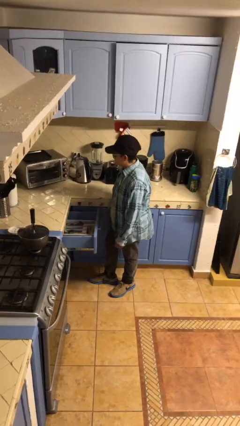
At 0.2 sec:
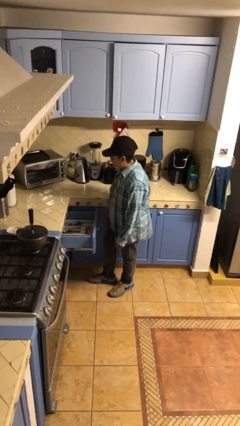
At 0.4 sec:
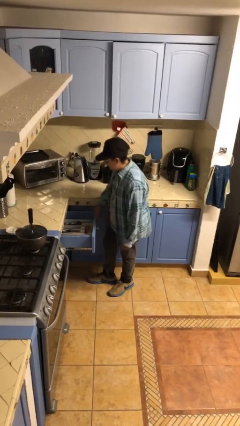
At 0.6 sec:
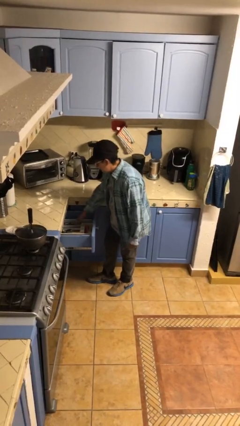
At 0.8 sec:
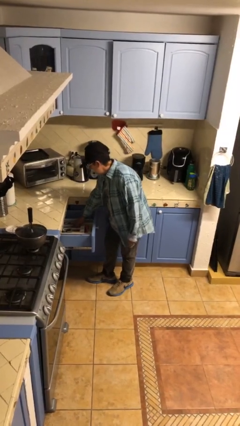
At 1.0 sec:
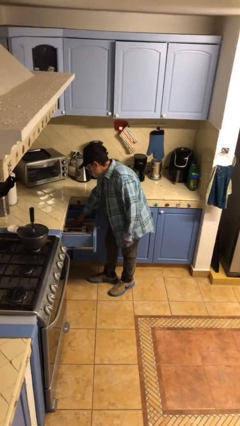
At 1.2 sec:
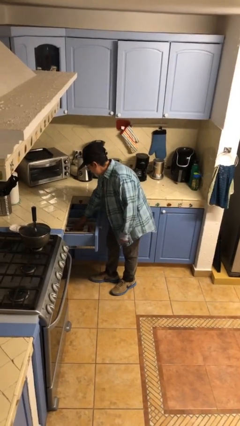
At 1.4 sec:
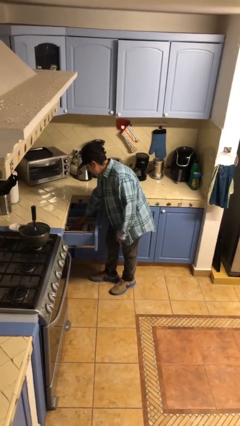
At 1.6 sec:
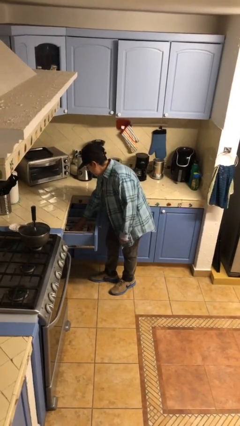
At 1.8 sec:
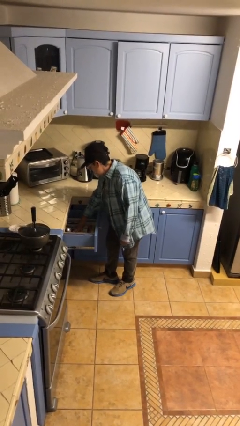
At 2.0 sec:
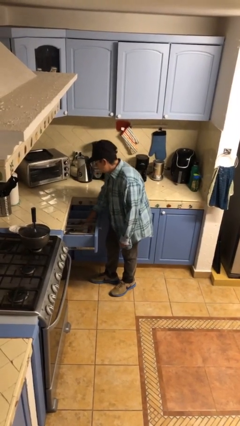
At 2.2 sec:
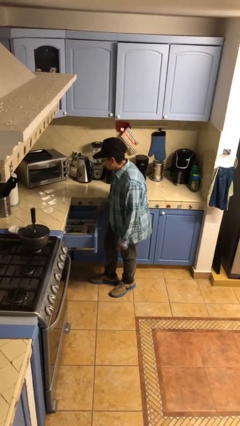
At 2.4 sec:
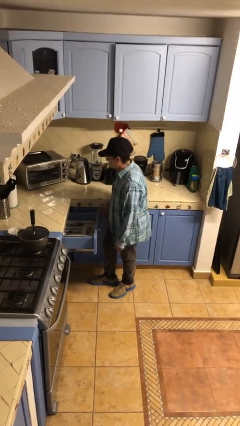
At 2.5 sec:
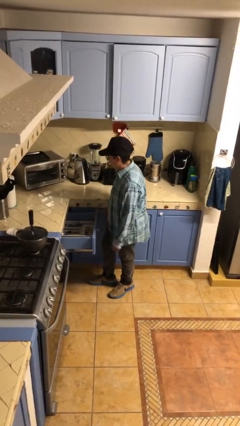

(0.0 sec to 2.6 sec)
person searches in kitchen drawer

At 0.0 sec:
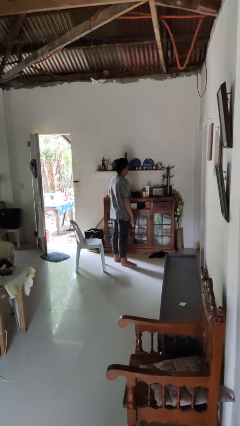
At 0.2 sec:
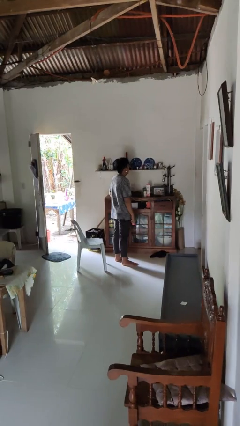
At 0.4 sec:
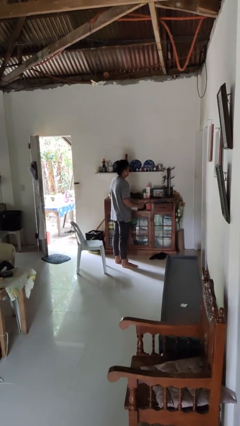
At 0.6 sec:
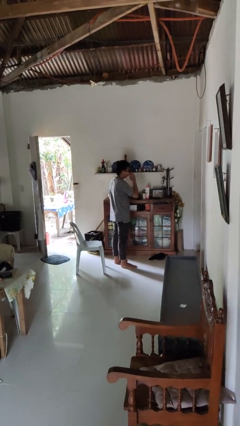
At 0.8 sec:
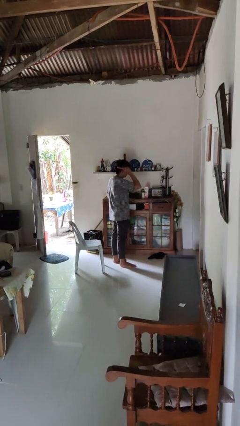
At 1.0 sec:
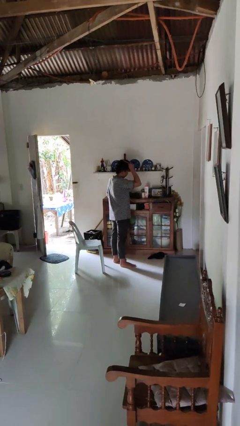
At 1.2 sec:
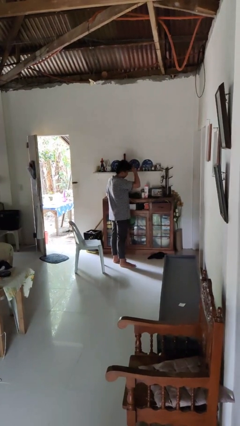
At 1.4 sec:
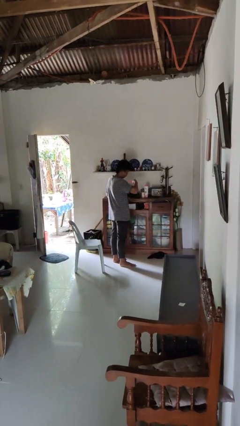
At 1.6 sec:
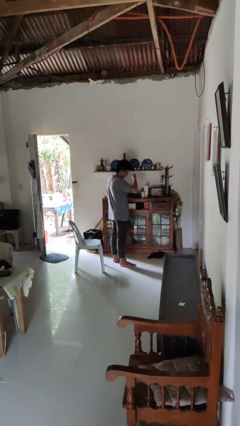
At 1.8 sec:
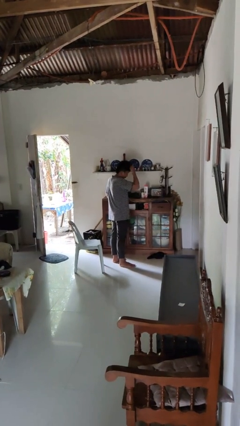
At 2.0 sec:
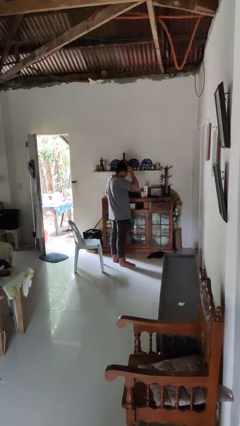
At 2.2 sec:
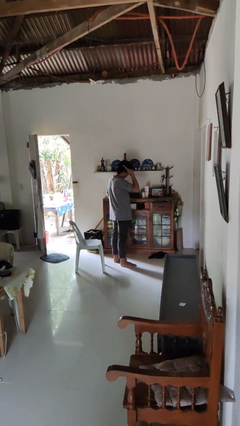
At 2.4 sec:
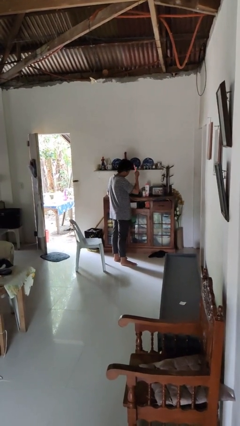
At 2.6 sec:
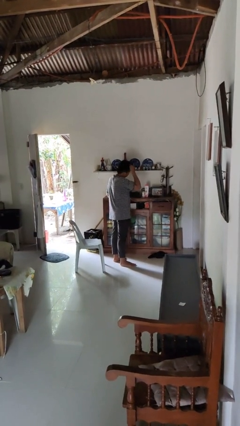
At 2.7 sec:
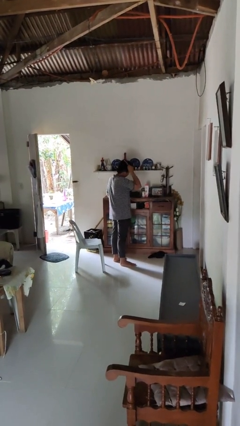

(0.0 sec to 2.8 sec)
person brushes hair

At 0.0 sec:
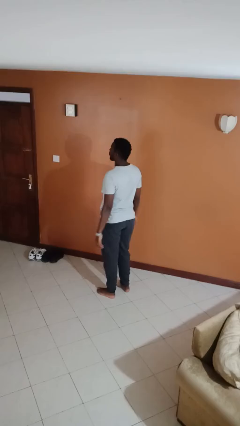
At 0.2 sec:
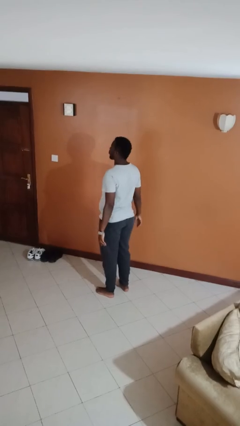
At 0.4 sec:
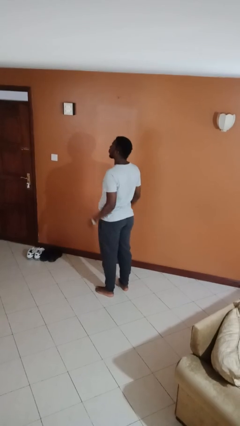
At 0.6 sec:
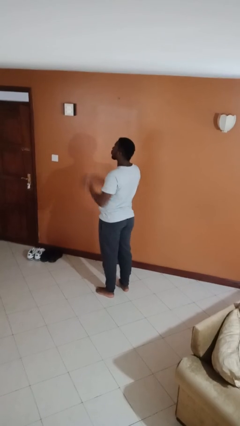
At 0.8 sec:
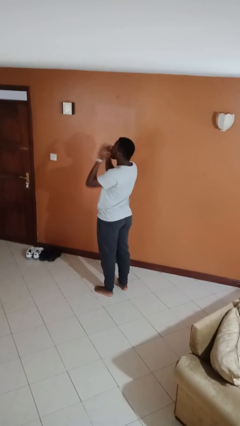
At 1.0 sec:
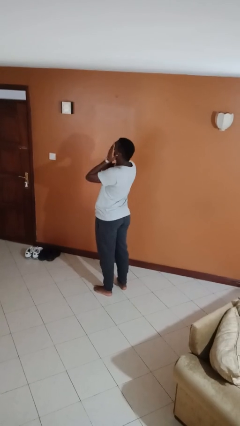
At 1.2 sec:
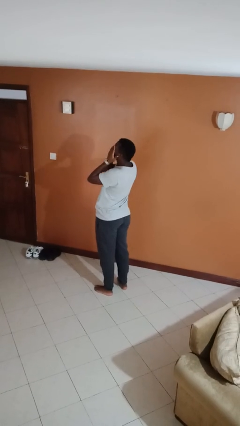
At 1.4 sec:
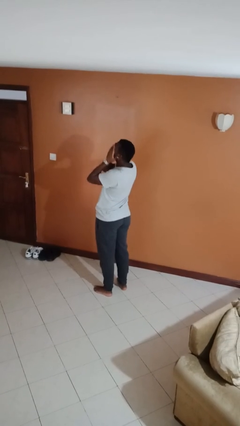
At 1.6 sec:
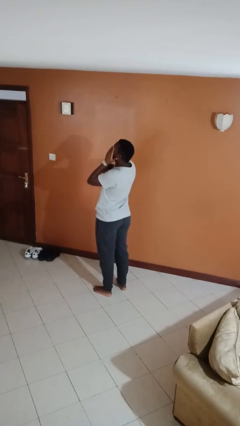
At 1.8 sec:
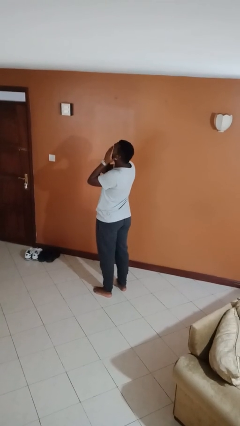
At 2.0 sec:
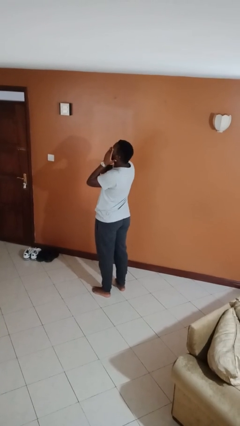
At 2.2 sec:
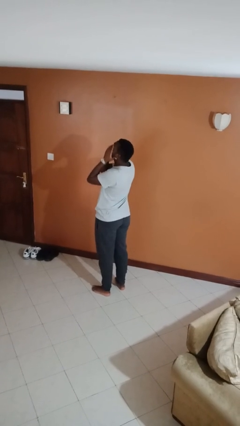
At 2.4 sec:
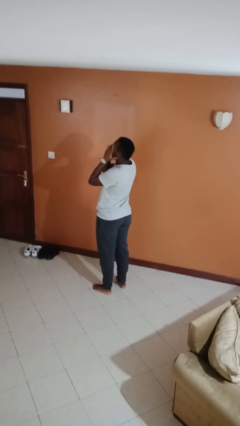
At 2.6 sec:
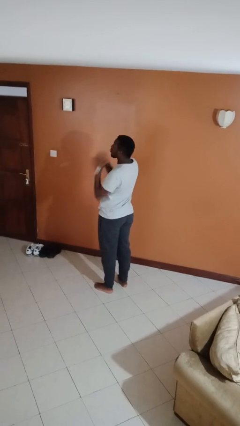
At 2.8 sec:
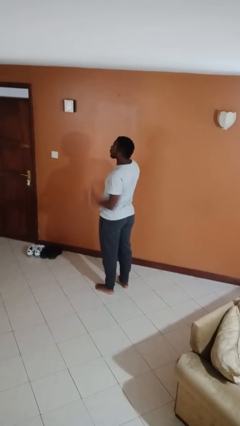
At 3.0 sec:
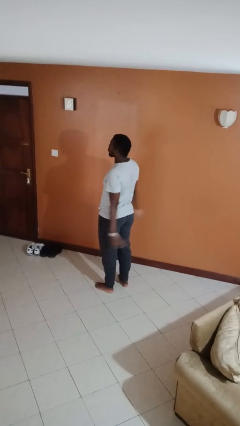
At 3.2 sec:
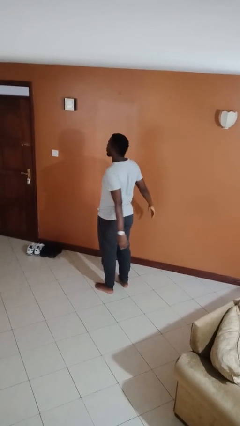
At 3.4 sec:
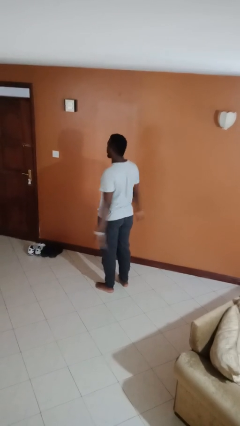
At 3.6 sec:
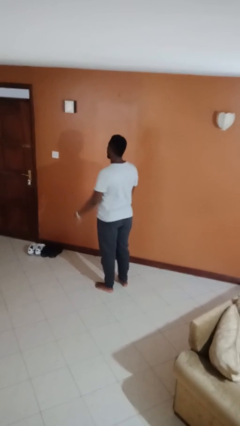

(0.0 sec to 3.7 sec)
person rubs eyes

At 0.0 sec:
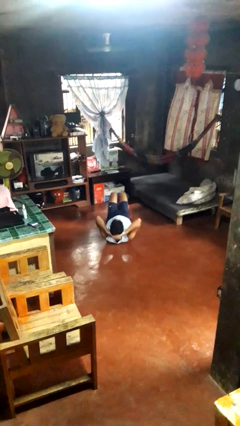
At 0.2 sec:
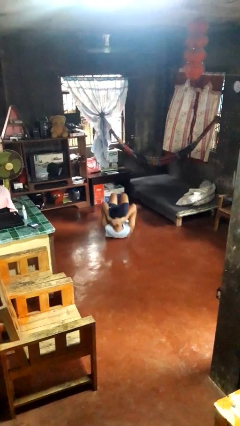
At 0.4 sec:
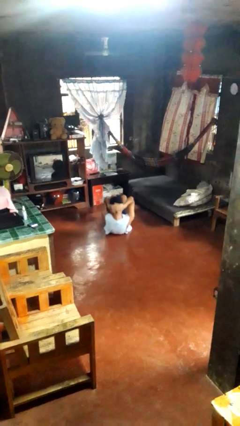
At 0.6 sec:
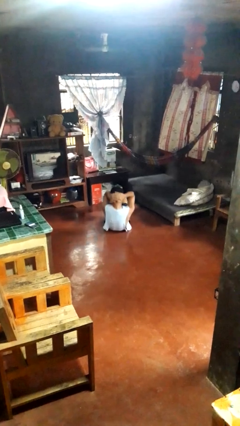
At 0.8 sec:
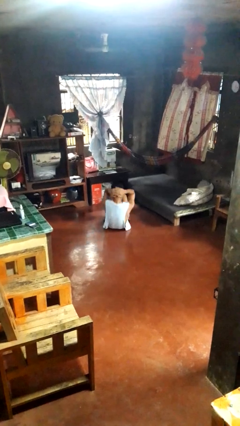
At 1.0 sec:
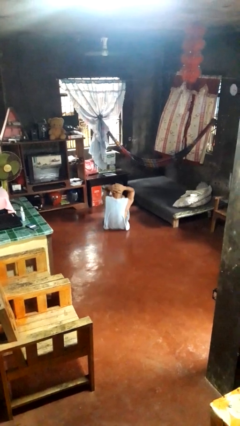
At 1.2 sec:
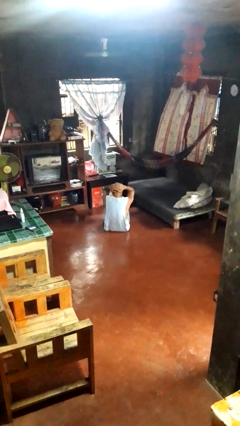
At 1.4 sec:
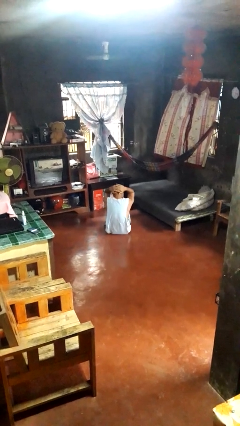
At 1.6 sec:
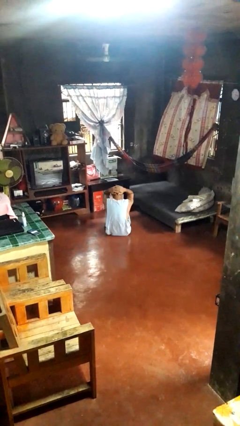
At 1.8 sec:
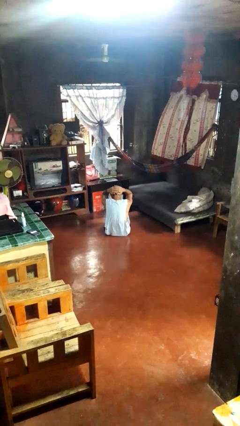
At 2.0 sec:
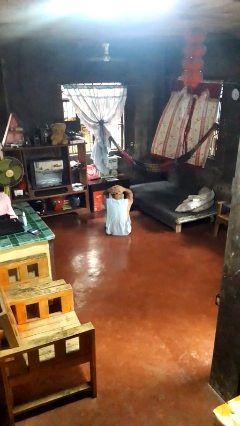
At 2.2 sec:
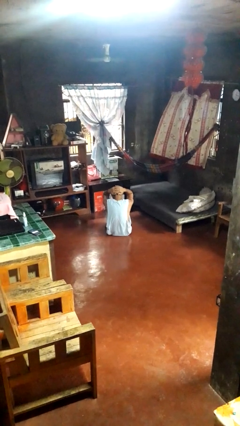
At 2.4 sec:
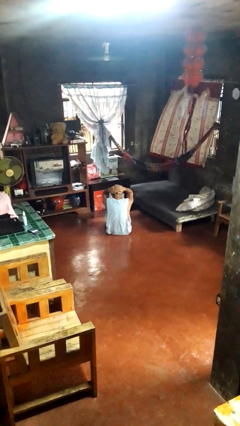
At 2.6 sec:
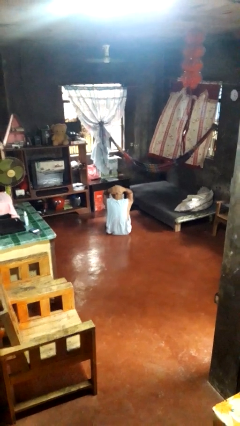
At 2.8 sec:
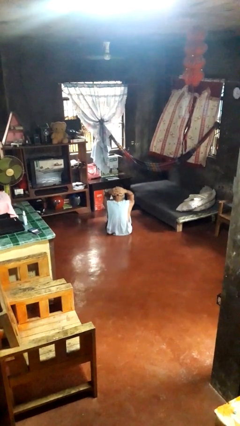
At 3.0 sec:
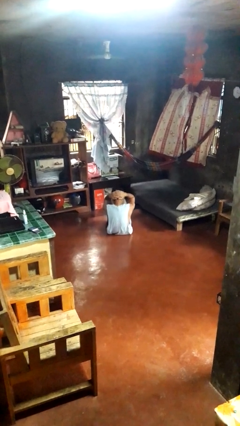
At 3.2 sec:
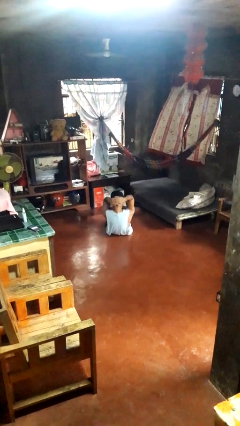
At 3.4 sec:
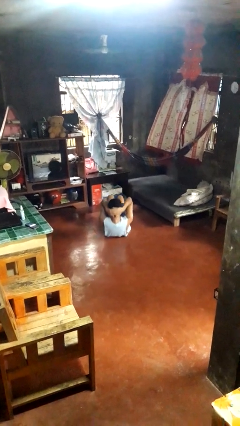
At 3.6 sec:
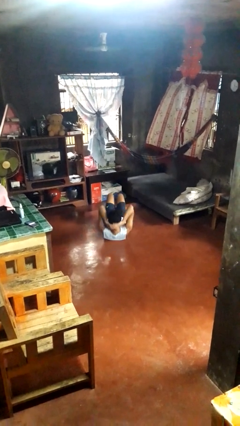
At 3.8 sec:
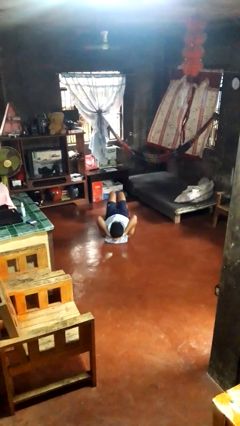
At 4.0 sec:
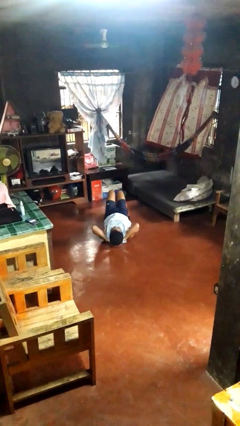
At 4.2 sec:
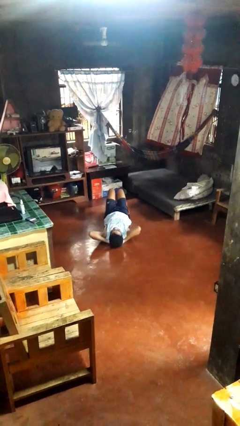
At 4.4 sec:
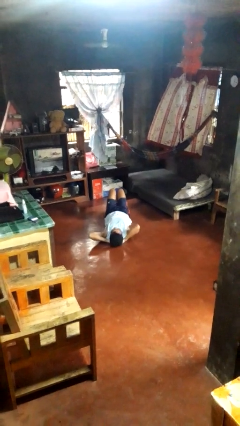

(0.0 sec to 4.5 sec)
person exercises with situp

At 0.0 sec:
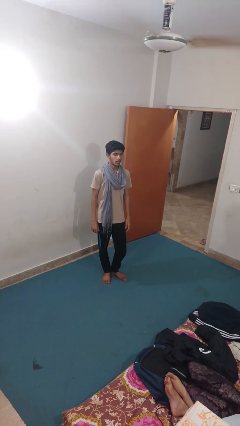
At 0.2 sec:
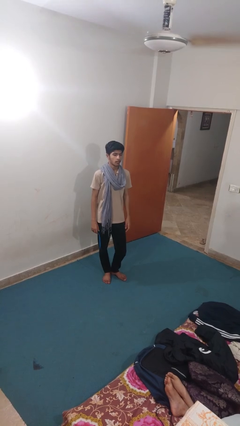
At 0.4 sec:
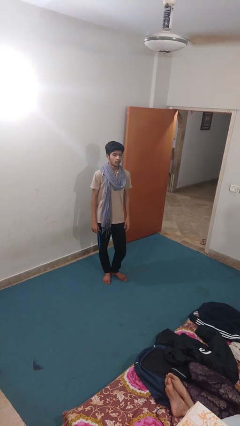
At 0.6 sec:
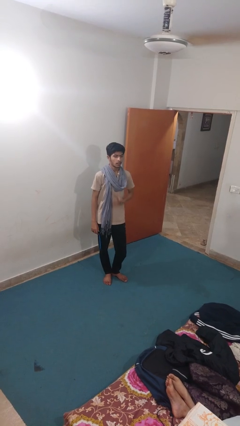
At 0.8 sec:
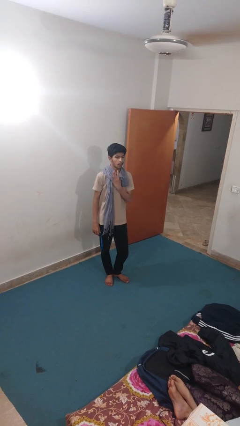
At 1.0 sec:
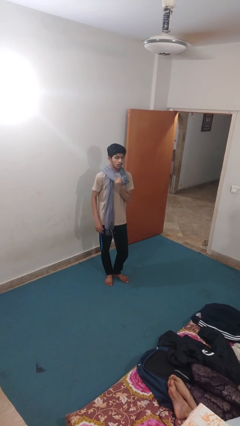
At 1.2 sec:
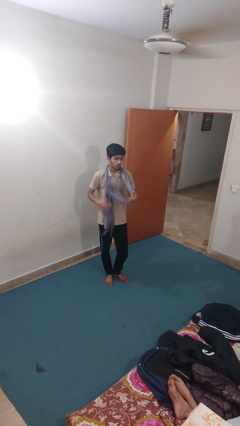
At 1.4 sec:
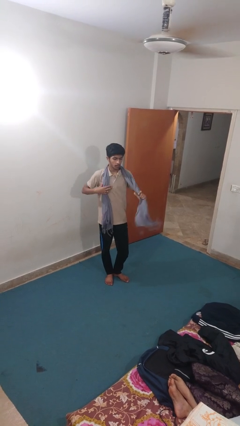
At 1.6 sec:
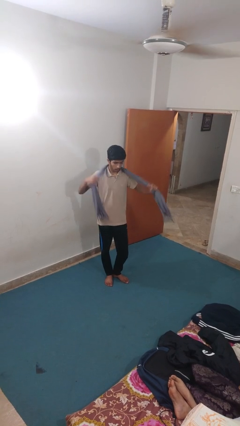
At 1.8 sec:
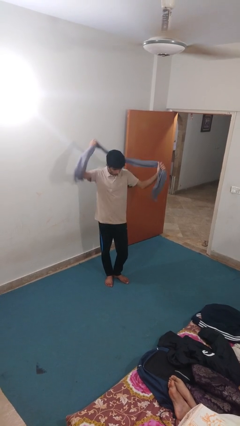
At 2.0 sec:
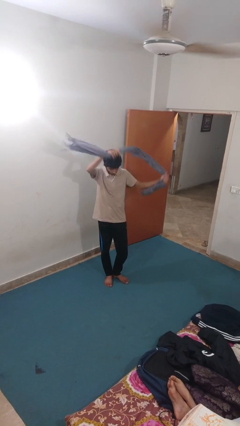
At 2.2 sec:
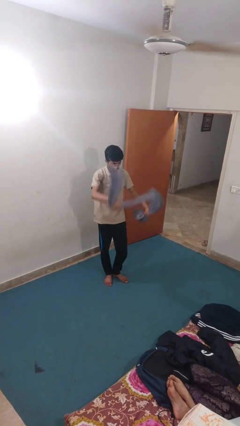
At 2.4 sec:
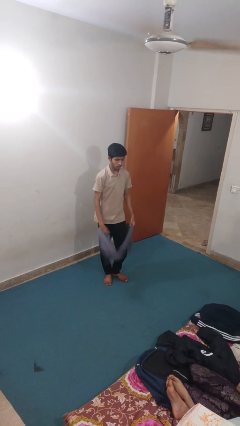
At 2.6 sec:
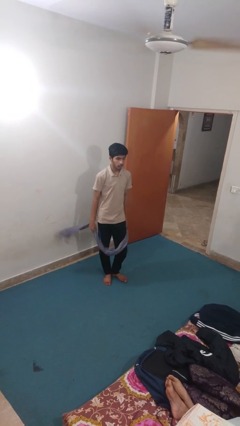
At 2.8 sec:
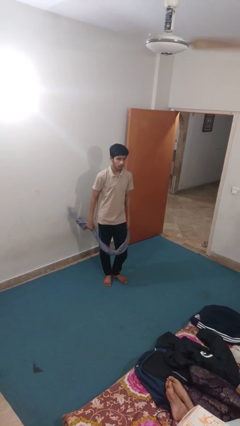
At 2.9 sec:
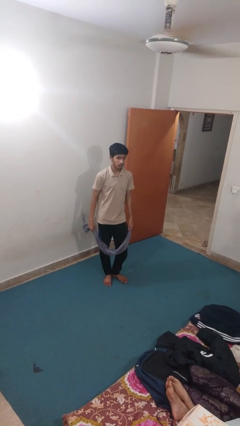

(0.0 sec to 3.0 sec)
person takes off scarf

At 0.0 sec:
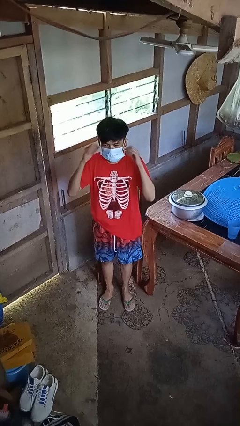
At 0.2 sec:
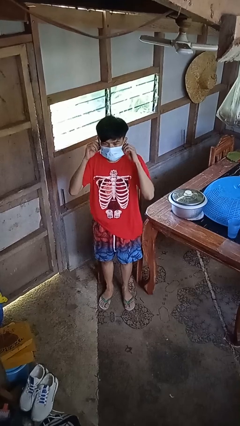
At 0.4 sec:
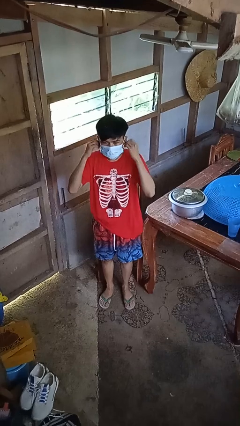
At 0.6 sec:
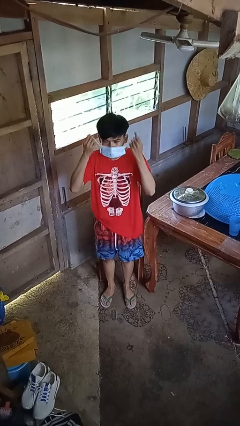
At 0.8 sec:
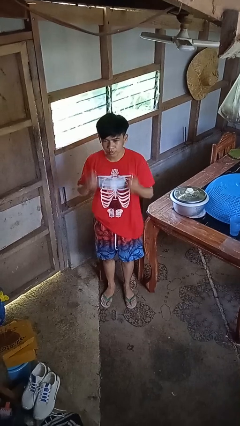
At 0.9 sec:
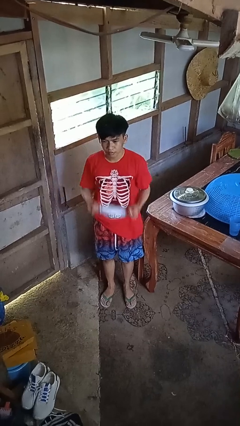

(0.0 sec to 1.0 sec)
person takes off facemask
